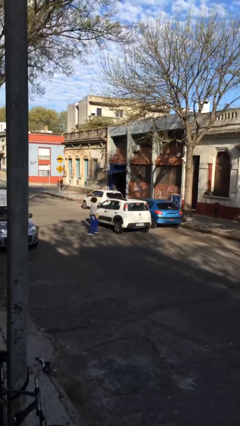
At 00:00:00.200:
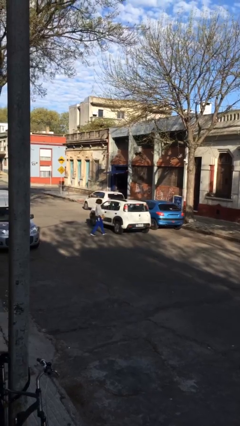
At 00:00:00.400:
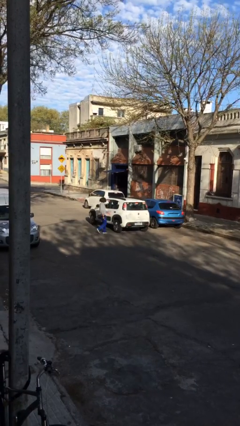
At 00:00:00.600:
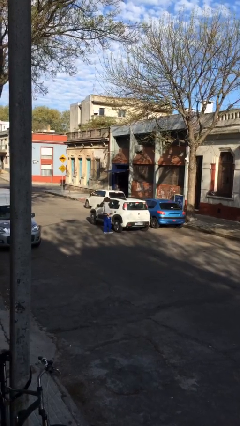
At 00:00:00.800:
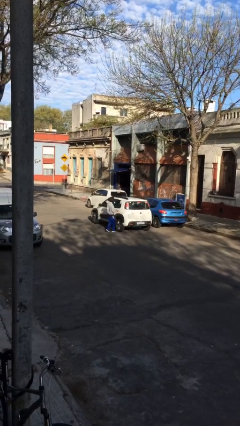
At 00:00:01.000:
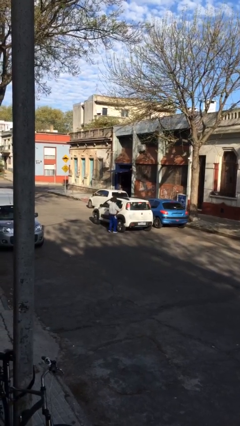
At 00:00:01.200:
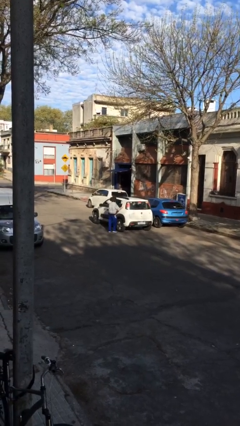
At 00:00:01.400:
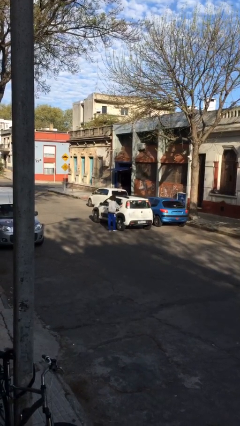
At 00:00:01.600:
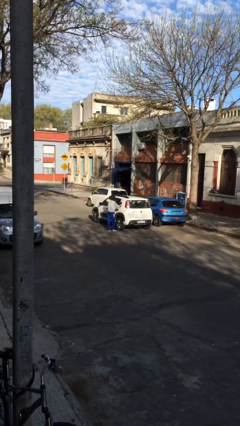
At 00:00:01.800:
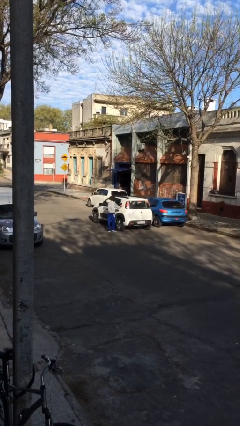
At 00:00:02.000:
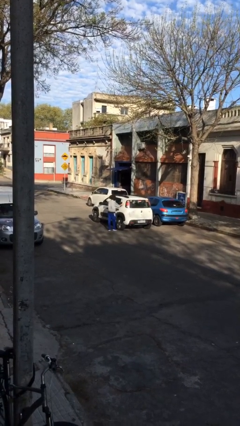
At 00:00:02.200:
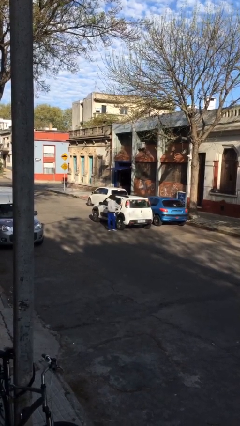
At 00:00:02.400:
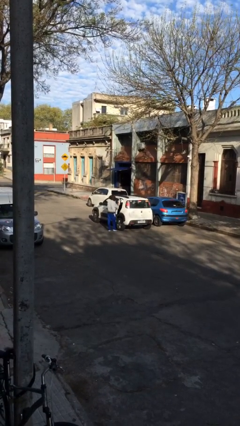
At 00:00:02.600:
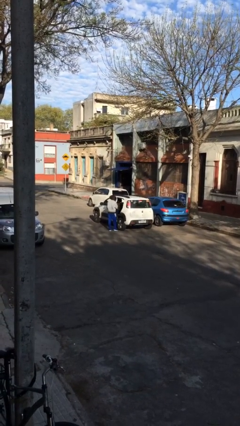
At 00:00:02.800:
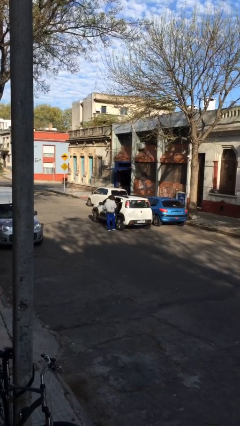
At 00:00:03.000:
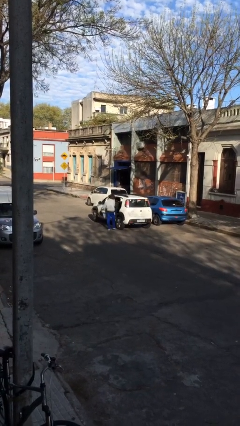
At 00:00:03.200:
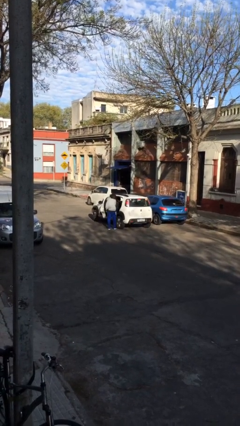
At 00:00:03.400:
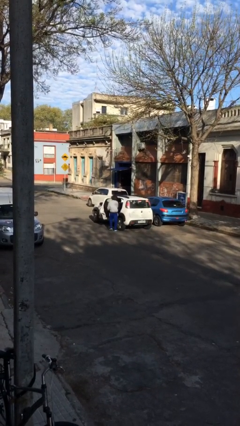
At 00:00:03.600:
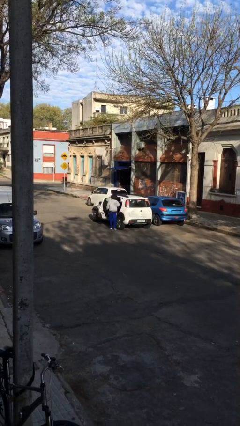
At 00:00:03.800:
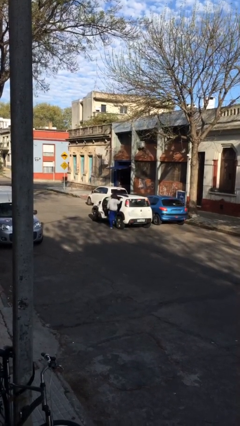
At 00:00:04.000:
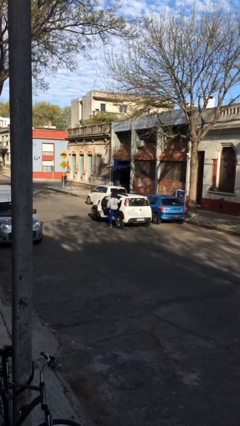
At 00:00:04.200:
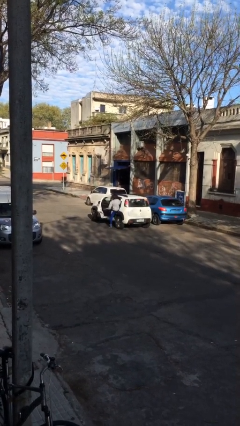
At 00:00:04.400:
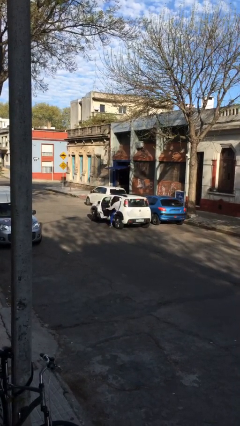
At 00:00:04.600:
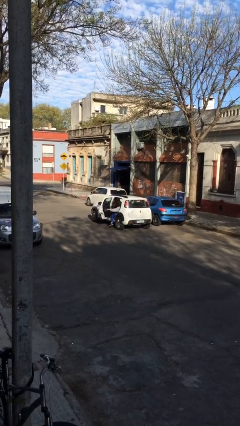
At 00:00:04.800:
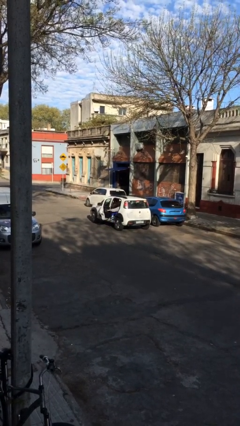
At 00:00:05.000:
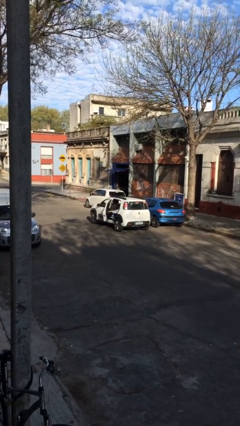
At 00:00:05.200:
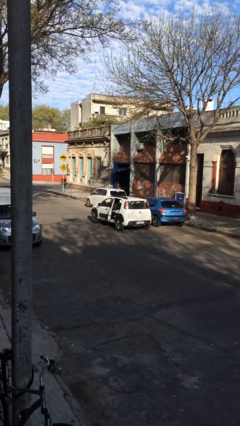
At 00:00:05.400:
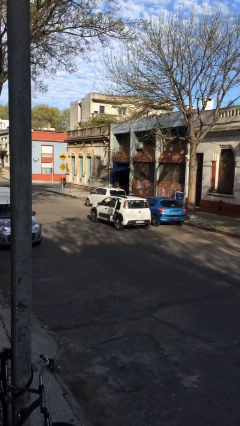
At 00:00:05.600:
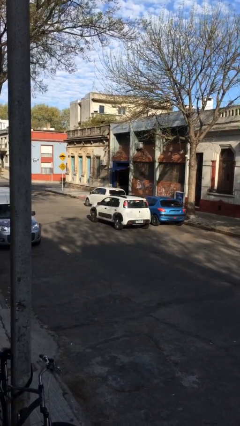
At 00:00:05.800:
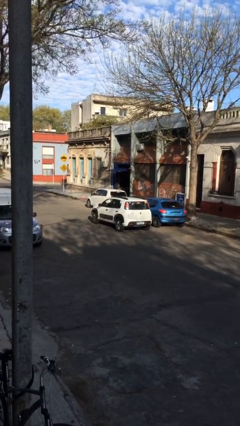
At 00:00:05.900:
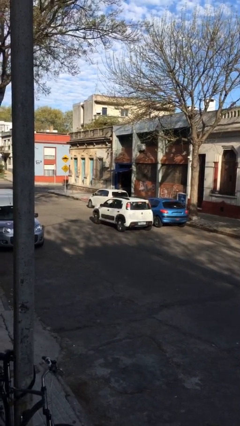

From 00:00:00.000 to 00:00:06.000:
car picks up person

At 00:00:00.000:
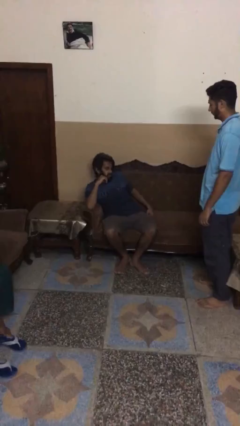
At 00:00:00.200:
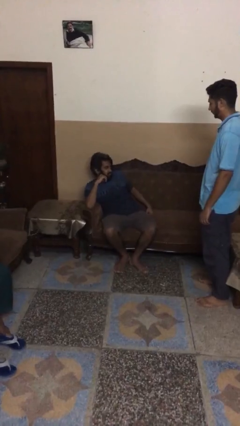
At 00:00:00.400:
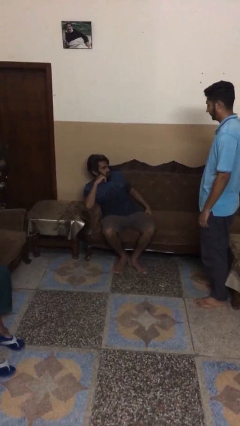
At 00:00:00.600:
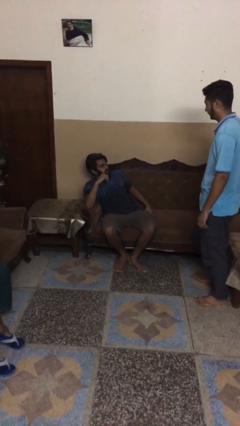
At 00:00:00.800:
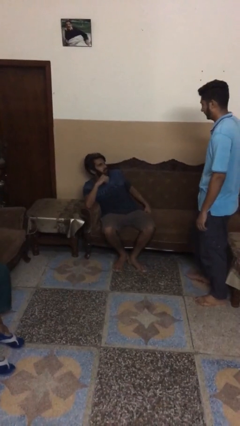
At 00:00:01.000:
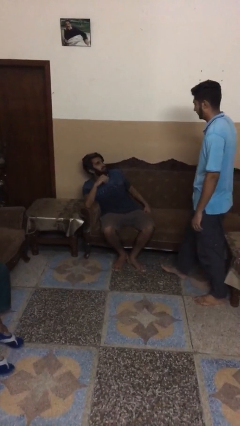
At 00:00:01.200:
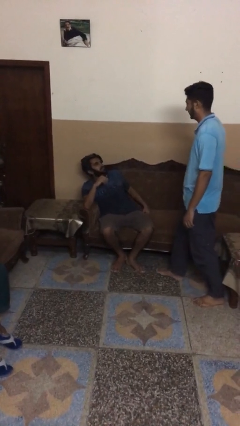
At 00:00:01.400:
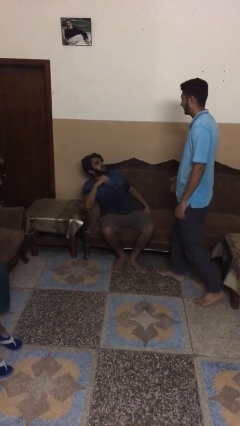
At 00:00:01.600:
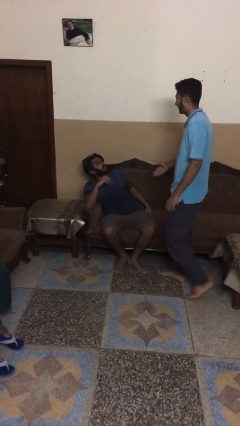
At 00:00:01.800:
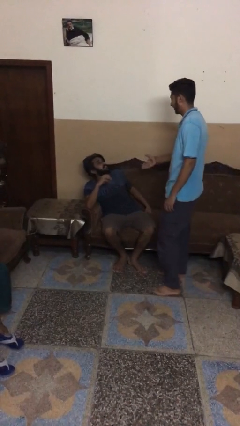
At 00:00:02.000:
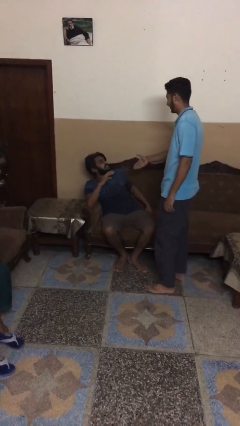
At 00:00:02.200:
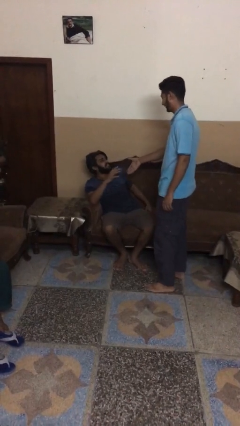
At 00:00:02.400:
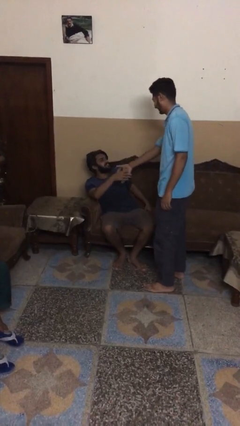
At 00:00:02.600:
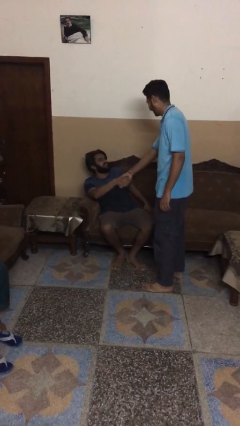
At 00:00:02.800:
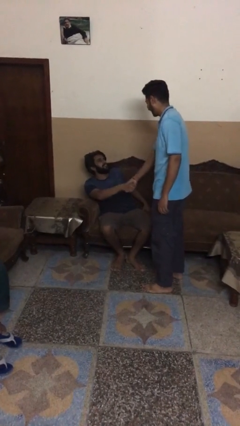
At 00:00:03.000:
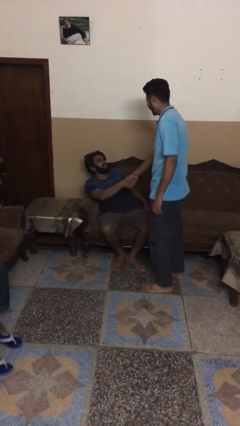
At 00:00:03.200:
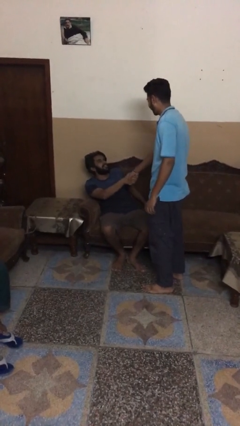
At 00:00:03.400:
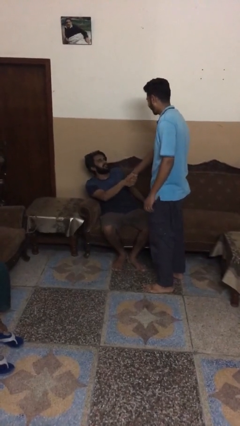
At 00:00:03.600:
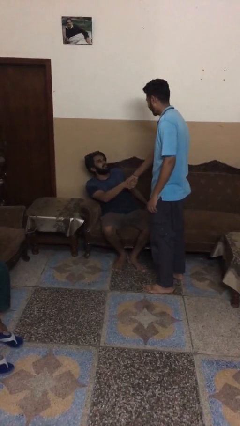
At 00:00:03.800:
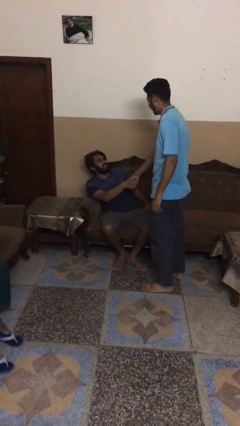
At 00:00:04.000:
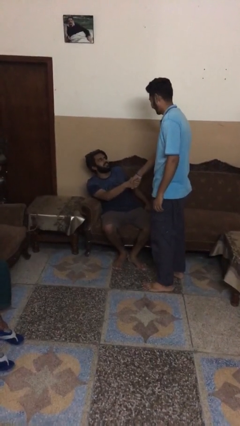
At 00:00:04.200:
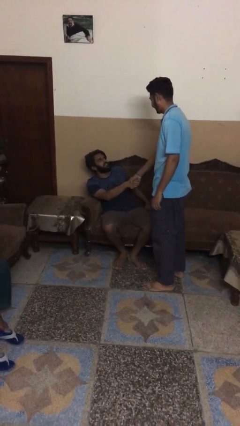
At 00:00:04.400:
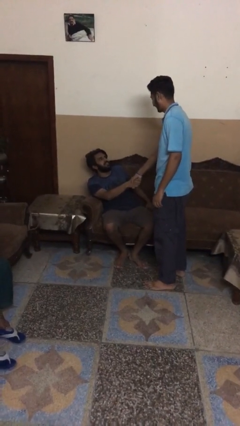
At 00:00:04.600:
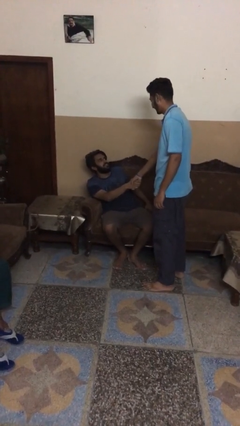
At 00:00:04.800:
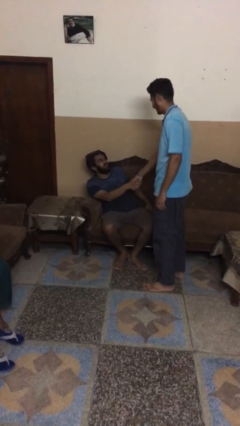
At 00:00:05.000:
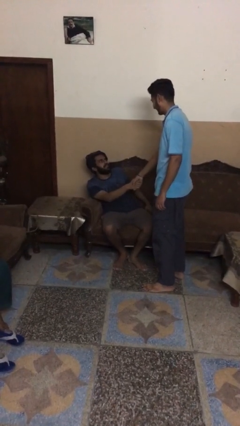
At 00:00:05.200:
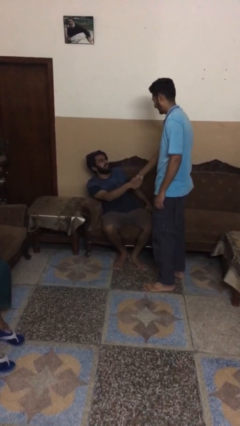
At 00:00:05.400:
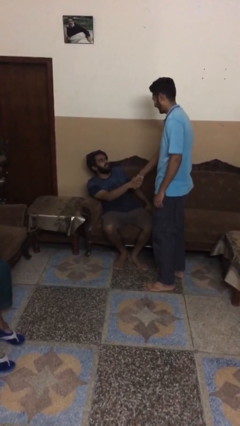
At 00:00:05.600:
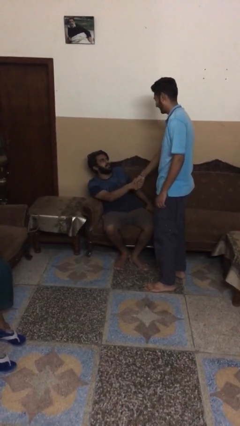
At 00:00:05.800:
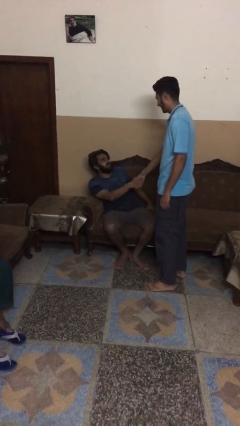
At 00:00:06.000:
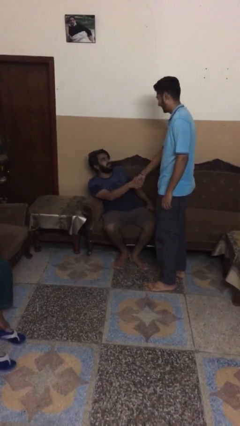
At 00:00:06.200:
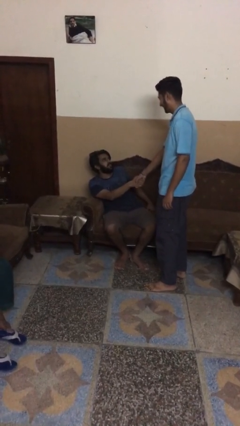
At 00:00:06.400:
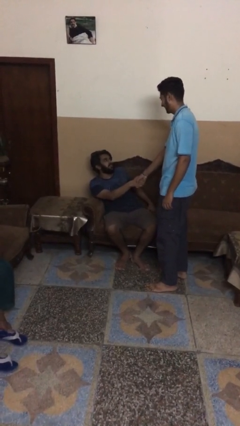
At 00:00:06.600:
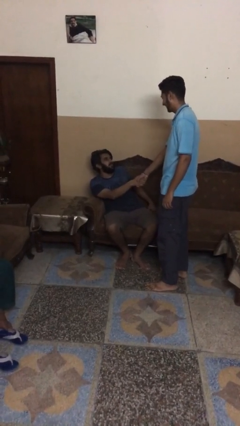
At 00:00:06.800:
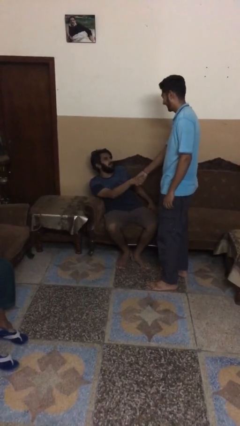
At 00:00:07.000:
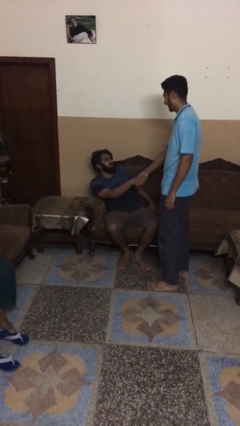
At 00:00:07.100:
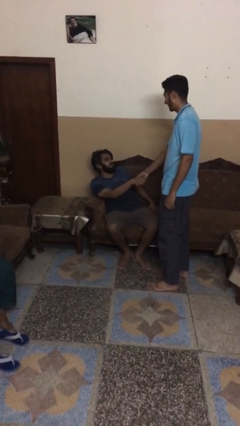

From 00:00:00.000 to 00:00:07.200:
person shakes hand

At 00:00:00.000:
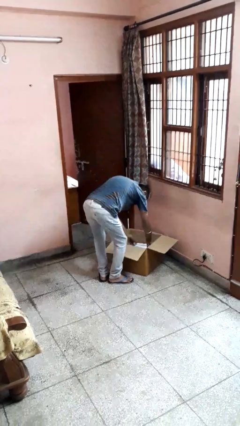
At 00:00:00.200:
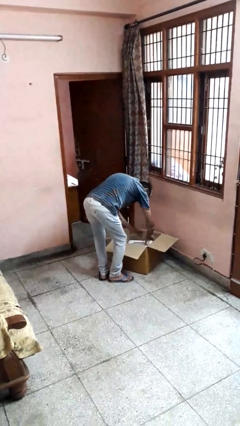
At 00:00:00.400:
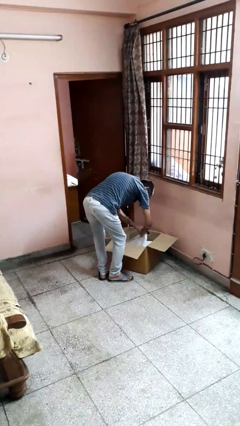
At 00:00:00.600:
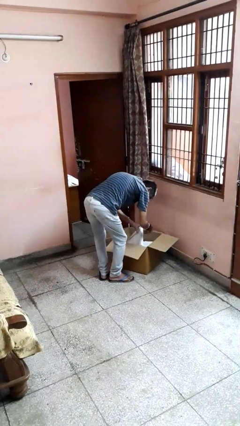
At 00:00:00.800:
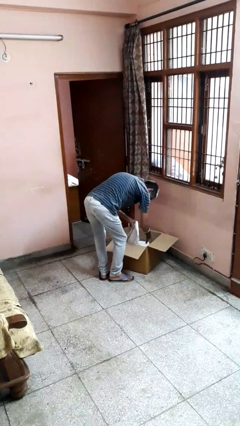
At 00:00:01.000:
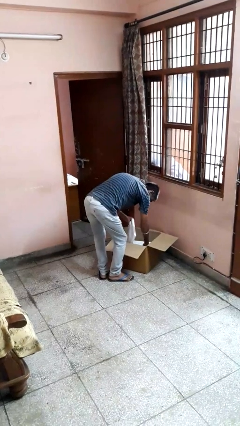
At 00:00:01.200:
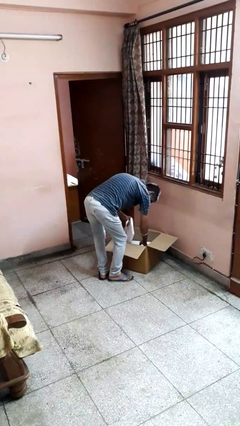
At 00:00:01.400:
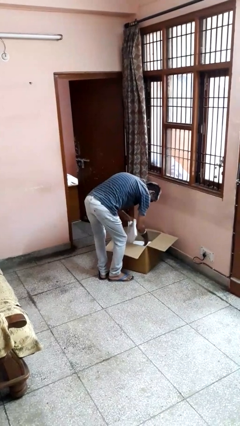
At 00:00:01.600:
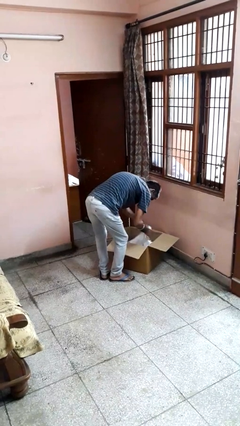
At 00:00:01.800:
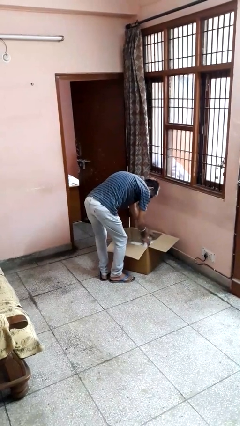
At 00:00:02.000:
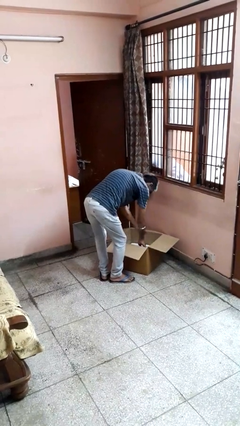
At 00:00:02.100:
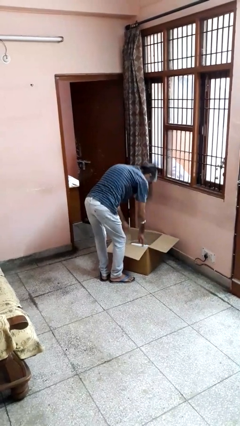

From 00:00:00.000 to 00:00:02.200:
person searches in box

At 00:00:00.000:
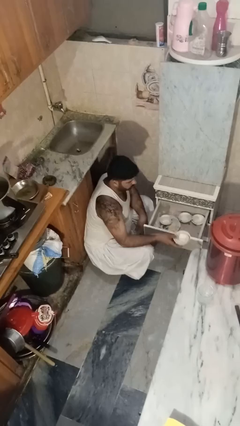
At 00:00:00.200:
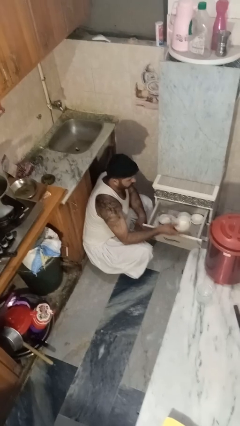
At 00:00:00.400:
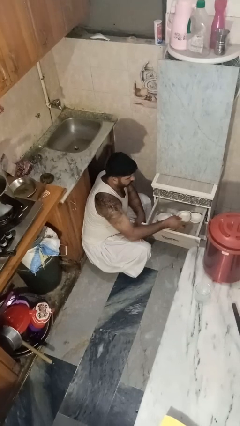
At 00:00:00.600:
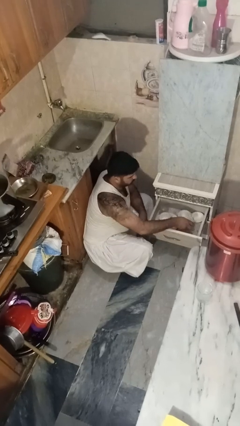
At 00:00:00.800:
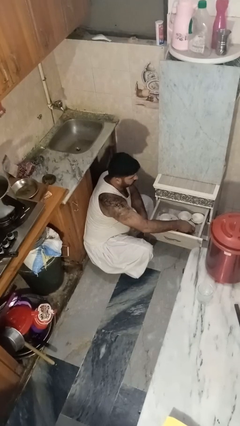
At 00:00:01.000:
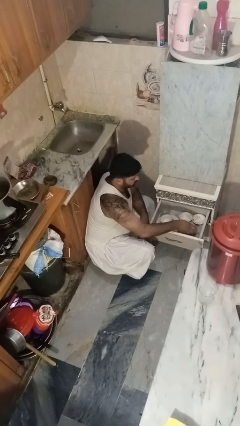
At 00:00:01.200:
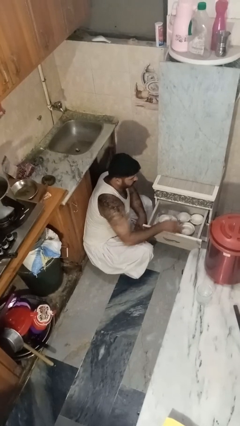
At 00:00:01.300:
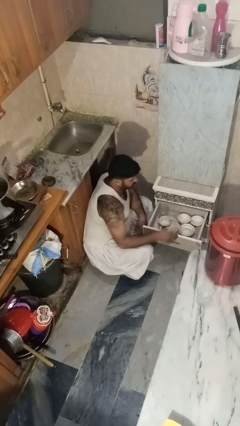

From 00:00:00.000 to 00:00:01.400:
person puts object into kitchen drawer

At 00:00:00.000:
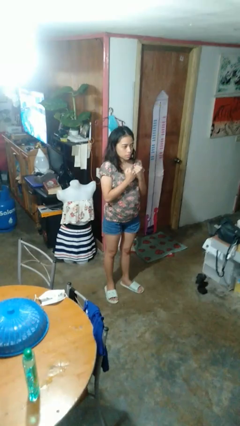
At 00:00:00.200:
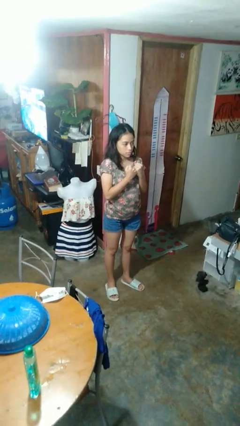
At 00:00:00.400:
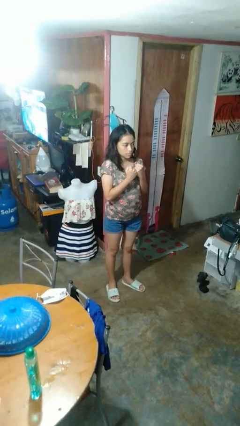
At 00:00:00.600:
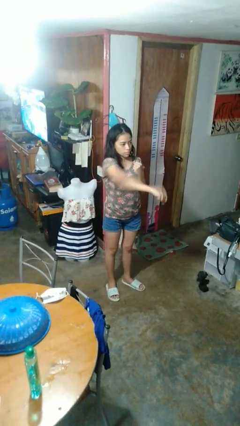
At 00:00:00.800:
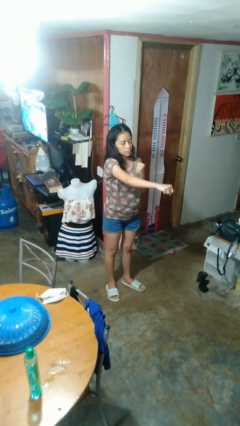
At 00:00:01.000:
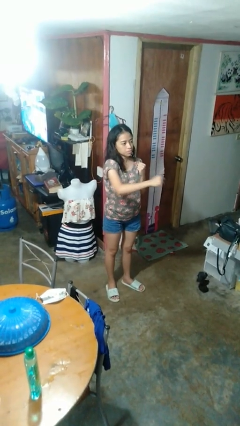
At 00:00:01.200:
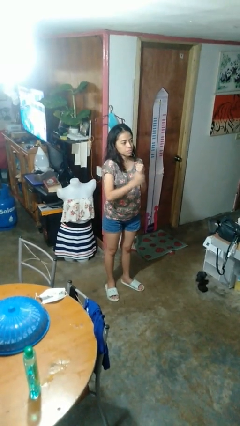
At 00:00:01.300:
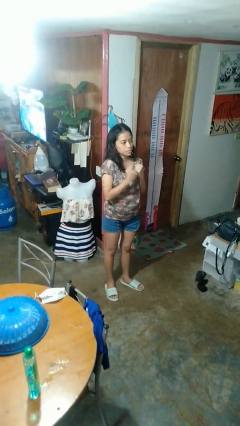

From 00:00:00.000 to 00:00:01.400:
person punches
